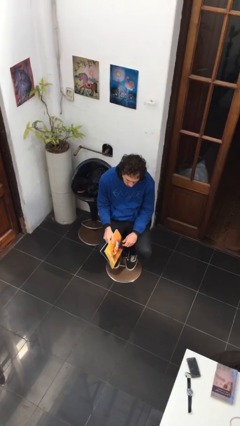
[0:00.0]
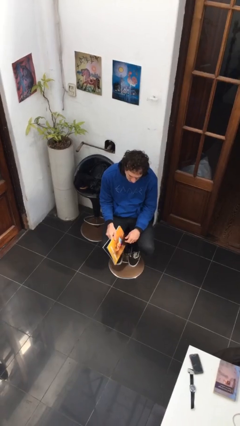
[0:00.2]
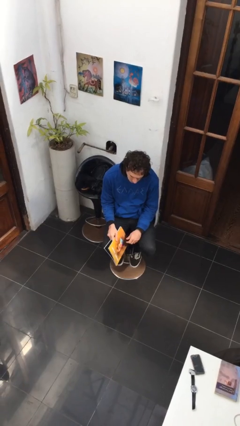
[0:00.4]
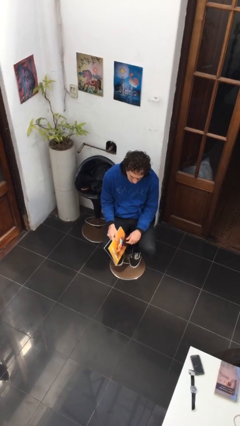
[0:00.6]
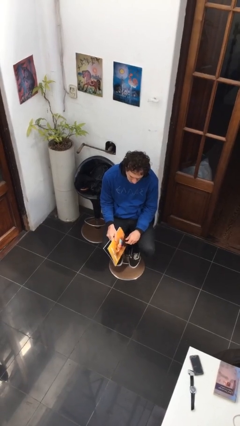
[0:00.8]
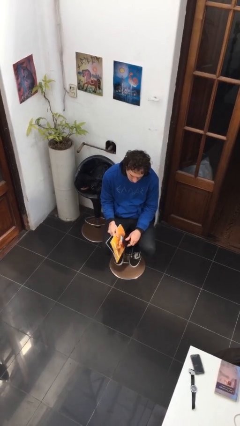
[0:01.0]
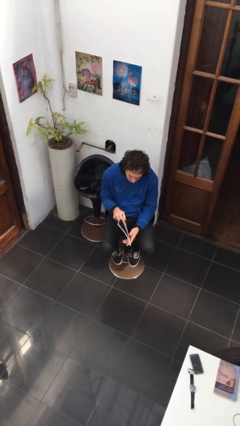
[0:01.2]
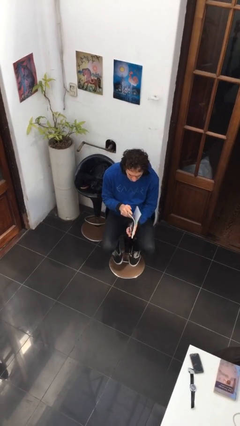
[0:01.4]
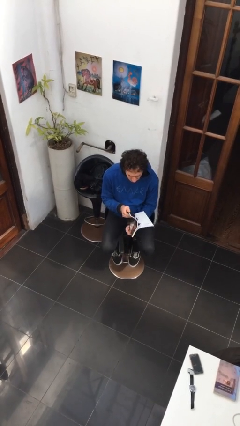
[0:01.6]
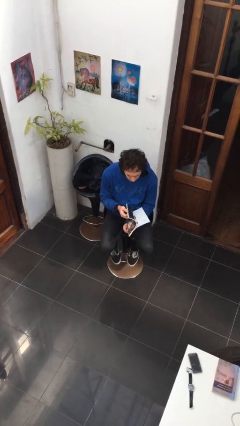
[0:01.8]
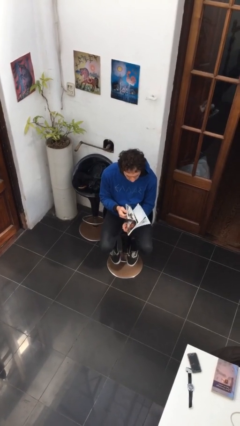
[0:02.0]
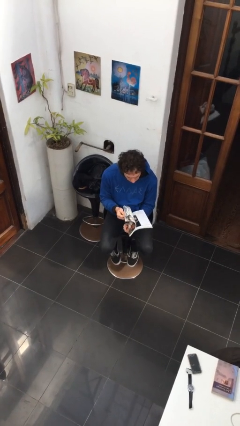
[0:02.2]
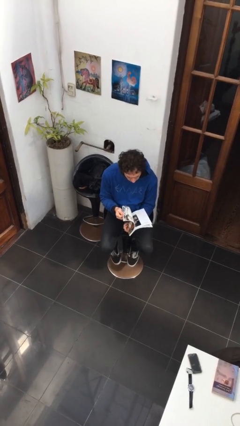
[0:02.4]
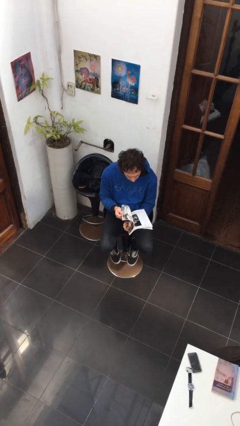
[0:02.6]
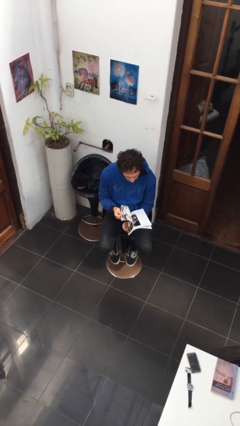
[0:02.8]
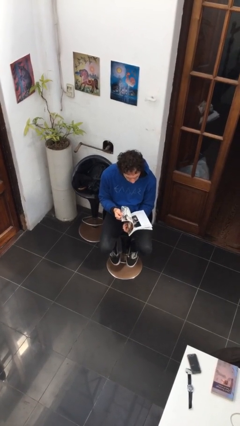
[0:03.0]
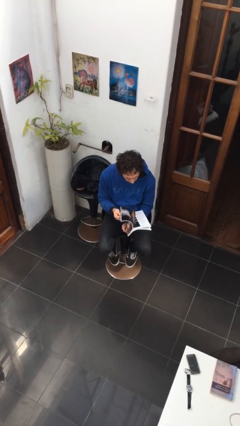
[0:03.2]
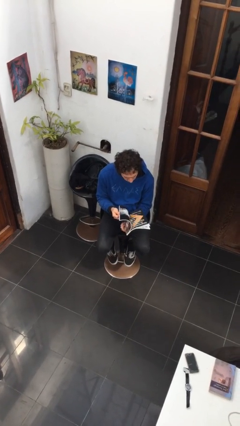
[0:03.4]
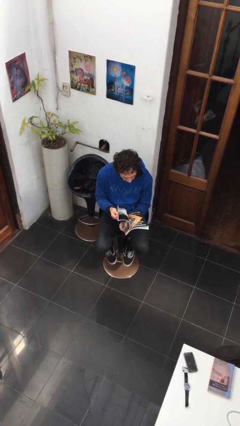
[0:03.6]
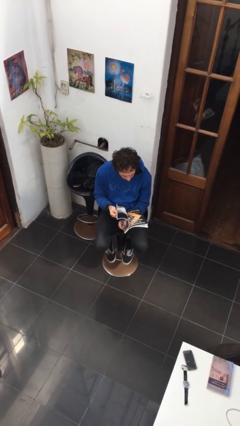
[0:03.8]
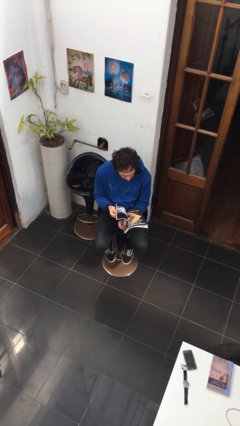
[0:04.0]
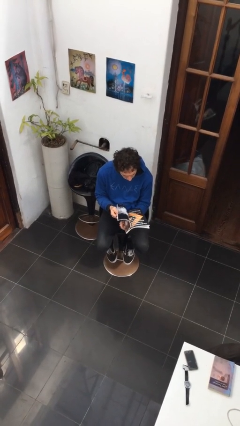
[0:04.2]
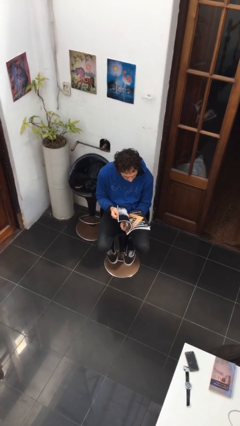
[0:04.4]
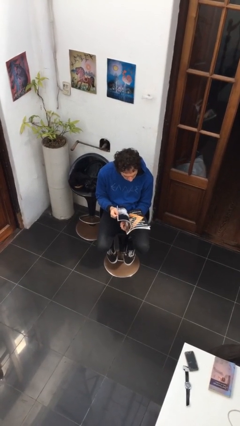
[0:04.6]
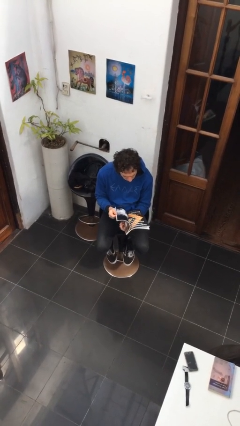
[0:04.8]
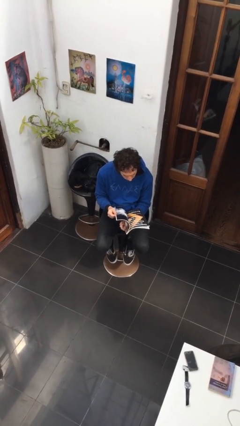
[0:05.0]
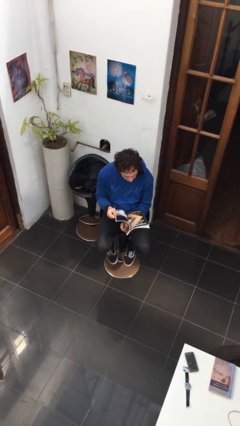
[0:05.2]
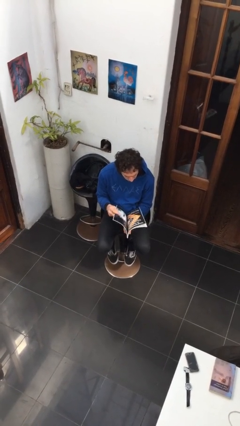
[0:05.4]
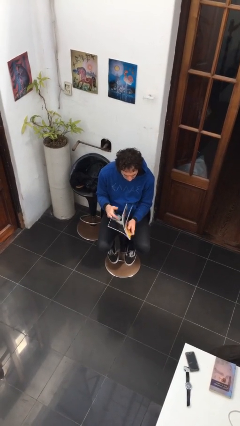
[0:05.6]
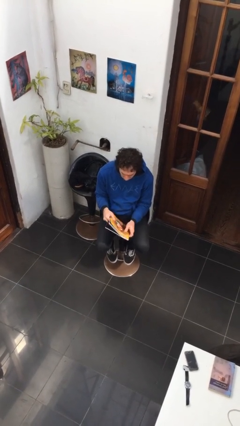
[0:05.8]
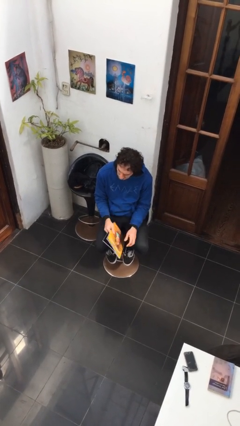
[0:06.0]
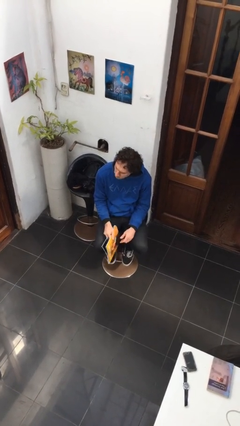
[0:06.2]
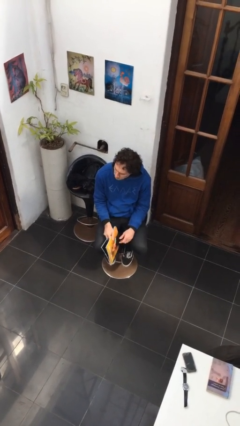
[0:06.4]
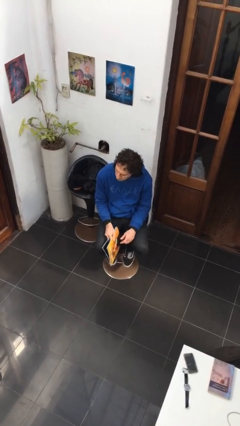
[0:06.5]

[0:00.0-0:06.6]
person reads magazine

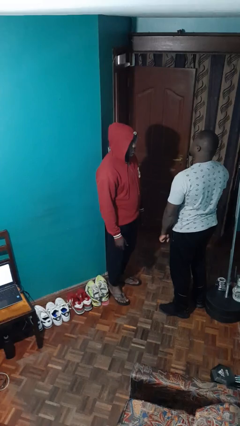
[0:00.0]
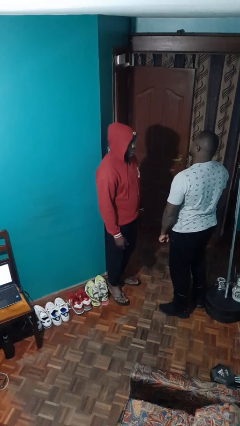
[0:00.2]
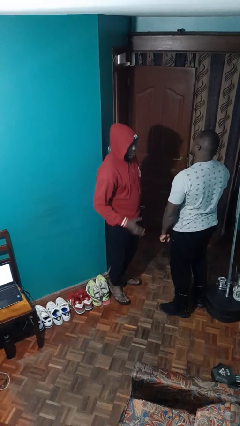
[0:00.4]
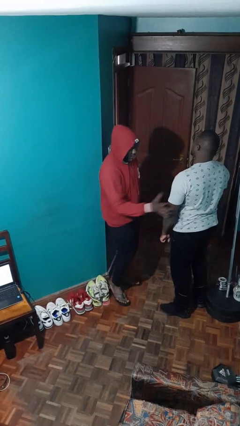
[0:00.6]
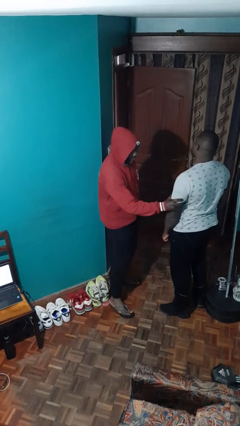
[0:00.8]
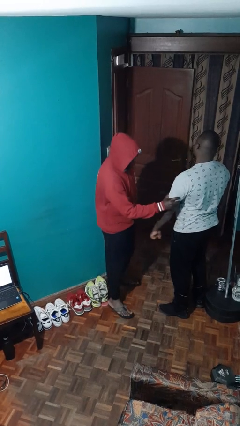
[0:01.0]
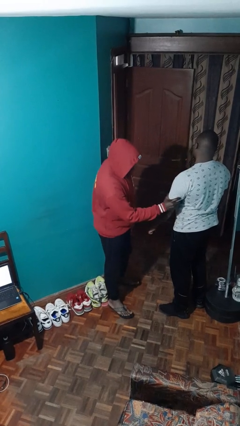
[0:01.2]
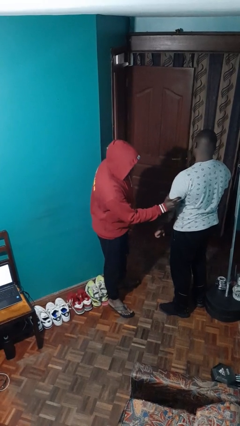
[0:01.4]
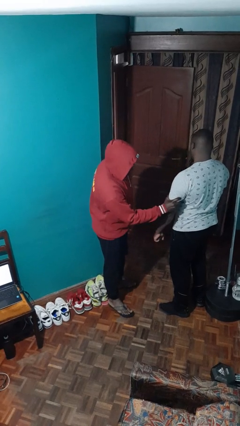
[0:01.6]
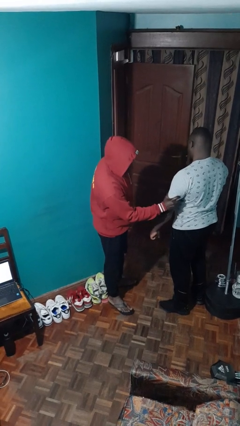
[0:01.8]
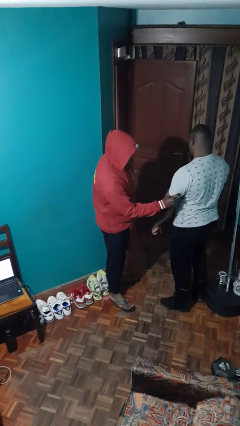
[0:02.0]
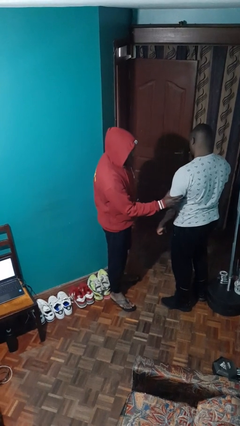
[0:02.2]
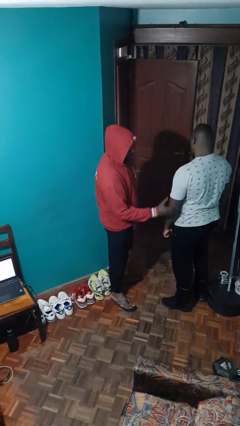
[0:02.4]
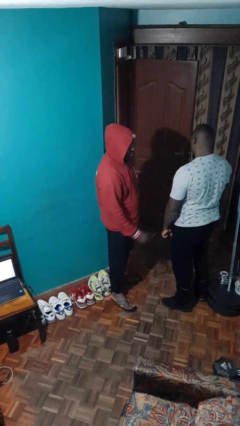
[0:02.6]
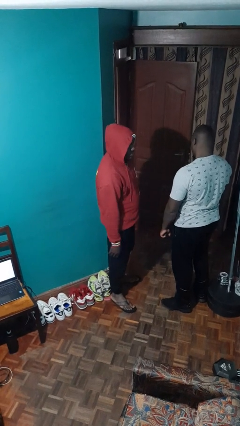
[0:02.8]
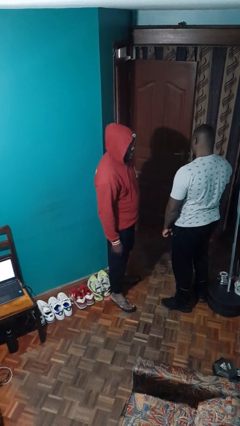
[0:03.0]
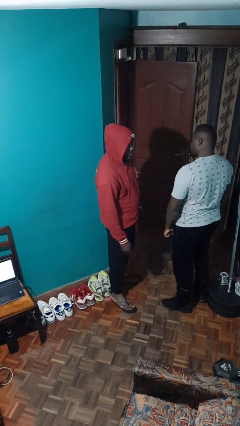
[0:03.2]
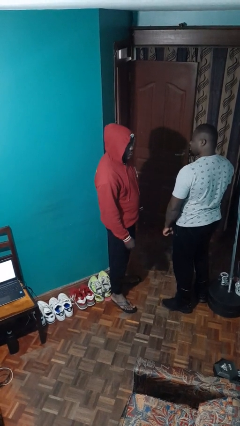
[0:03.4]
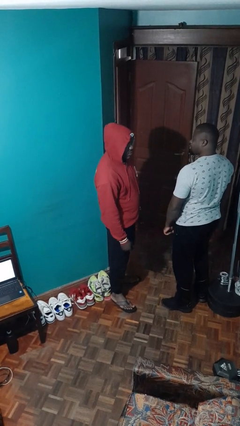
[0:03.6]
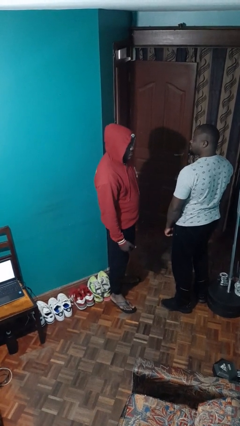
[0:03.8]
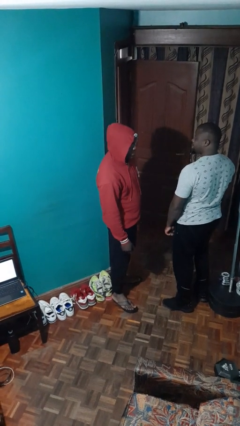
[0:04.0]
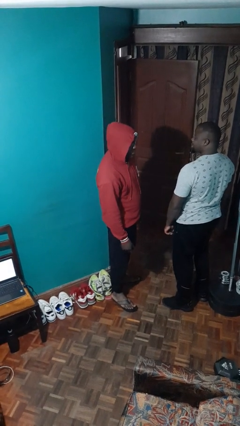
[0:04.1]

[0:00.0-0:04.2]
person grabs person by bicep

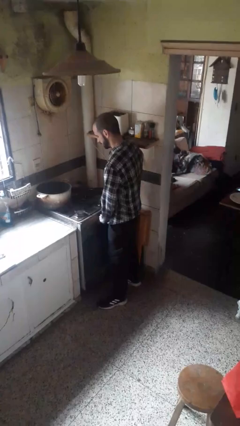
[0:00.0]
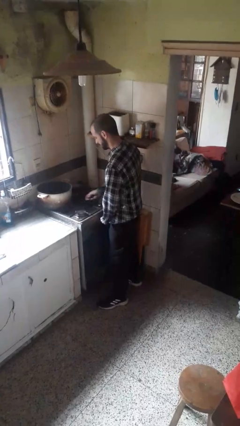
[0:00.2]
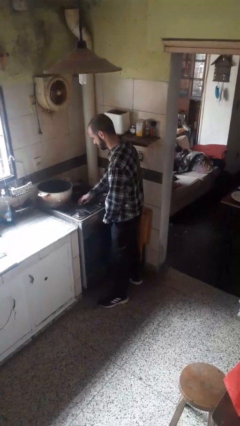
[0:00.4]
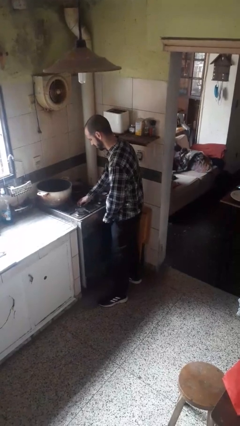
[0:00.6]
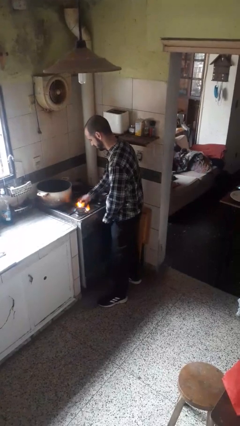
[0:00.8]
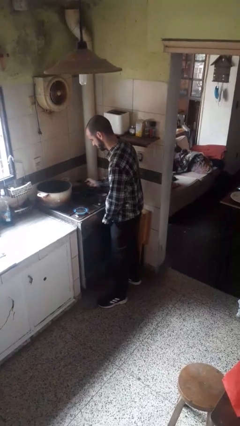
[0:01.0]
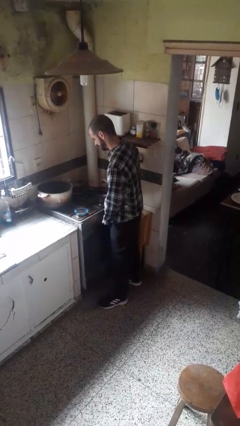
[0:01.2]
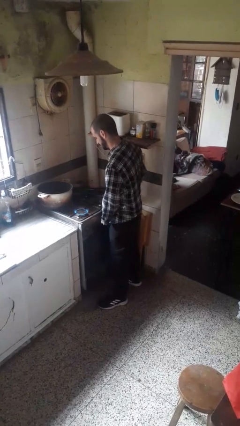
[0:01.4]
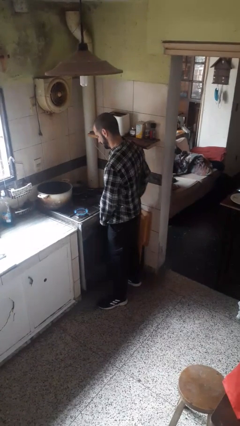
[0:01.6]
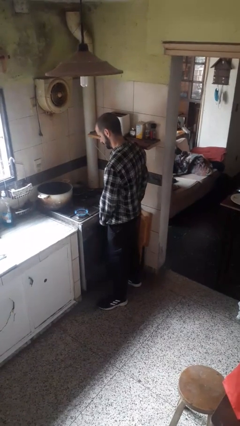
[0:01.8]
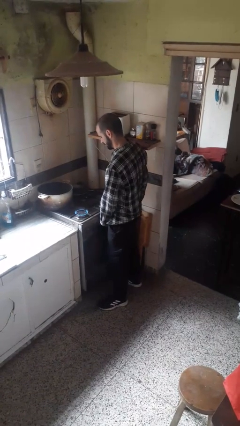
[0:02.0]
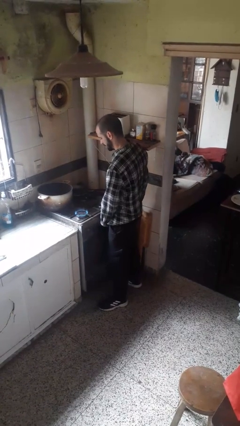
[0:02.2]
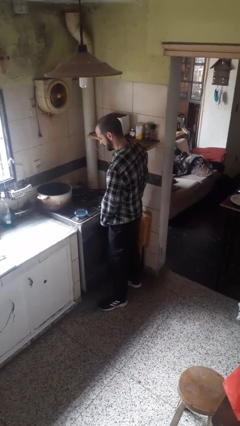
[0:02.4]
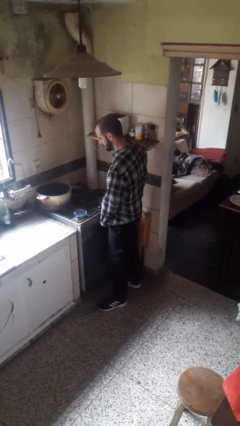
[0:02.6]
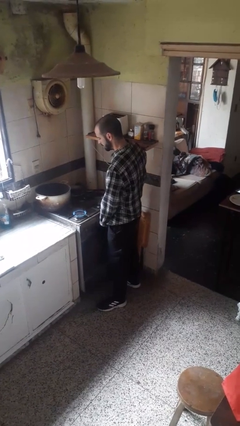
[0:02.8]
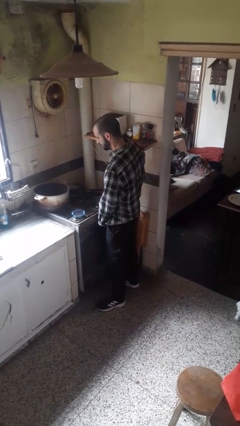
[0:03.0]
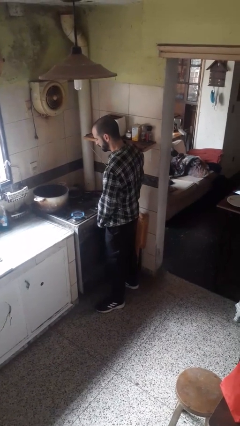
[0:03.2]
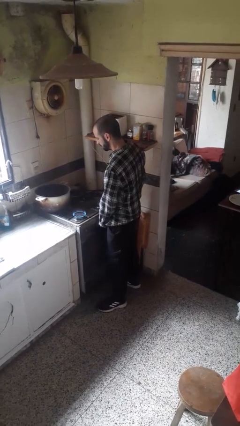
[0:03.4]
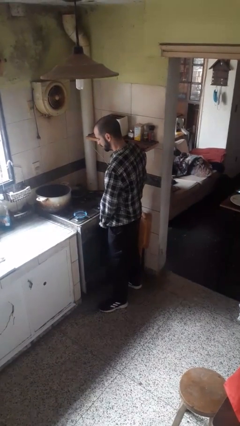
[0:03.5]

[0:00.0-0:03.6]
person turns on stovetop

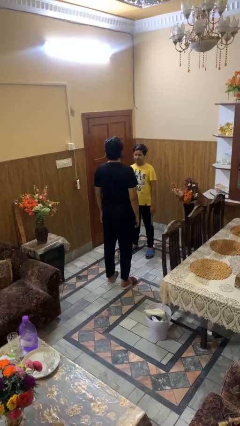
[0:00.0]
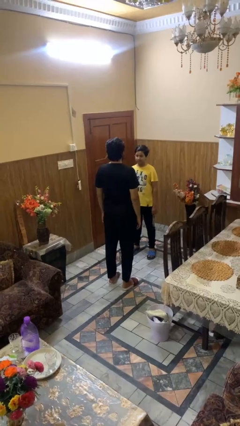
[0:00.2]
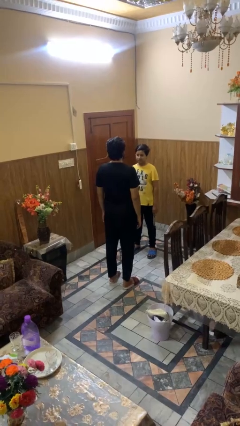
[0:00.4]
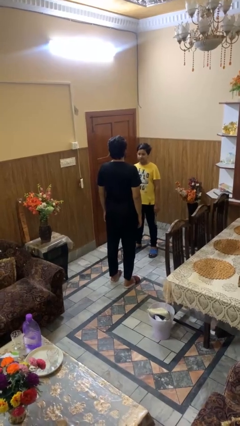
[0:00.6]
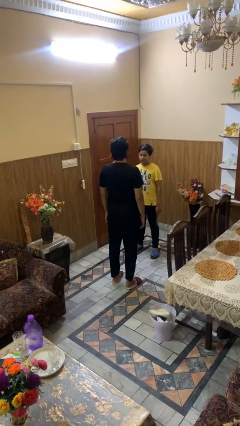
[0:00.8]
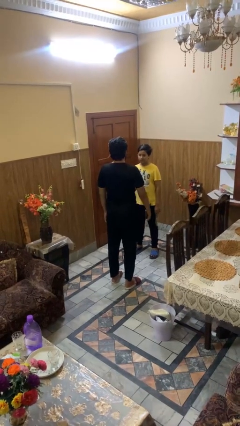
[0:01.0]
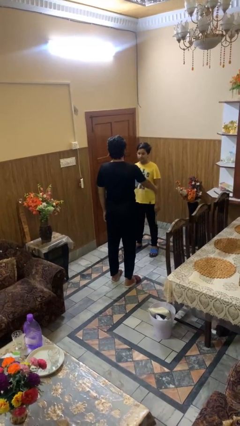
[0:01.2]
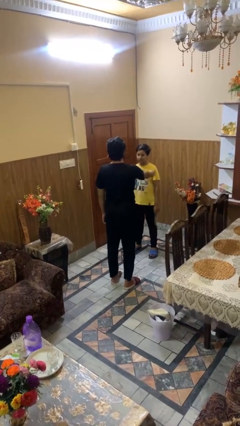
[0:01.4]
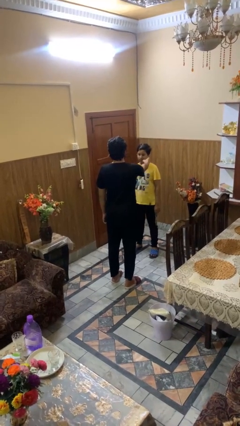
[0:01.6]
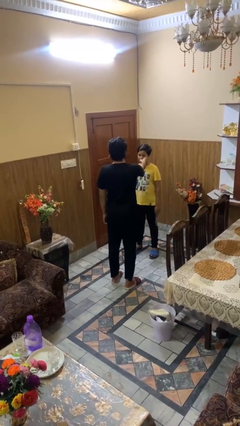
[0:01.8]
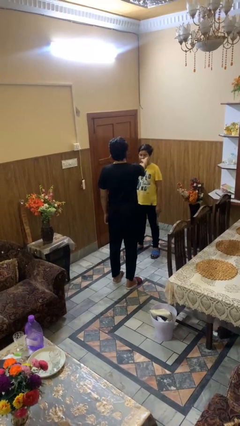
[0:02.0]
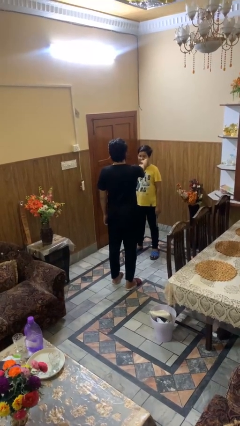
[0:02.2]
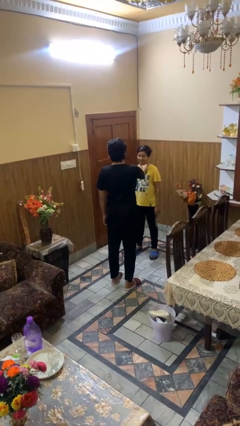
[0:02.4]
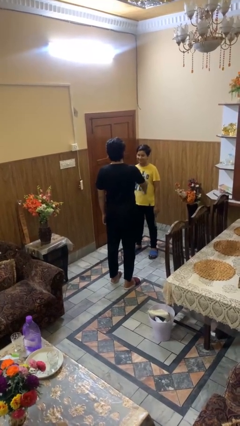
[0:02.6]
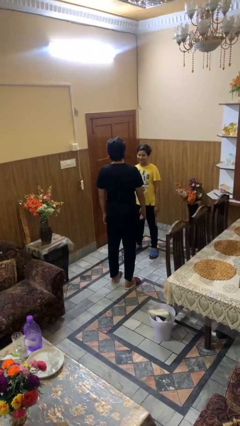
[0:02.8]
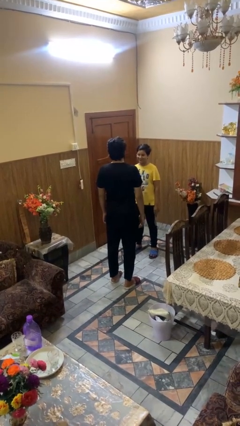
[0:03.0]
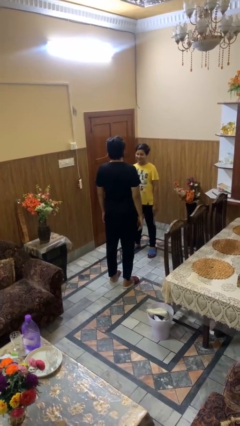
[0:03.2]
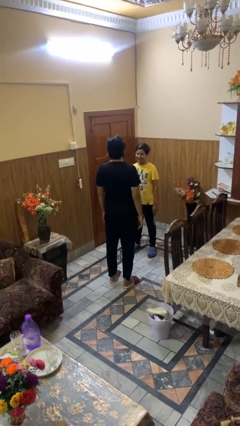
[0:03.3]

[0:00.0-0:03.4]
person touches face of person
